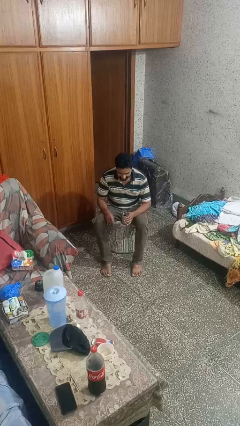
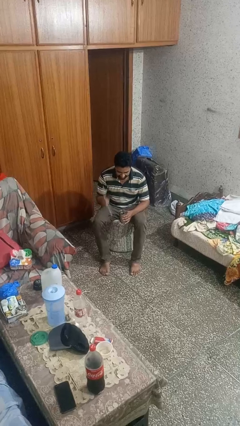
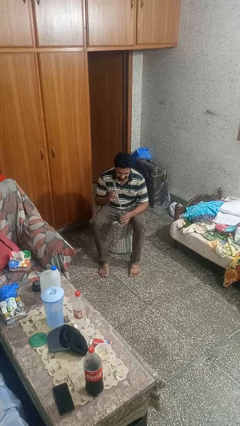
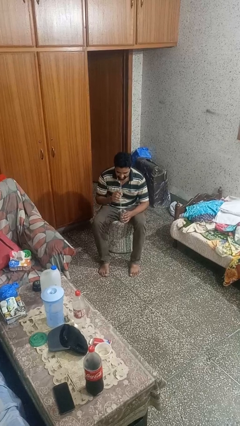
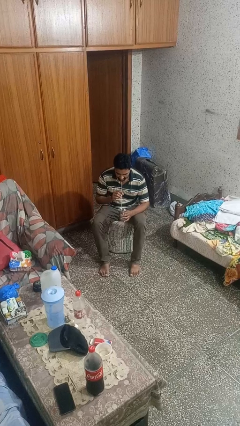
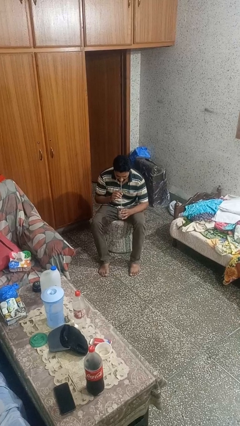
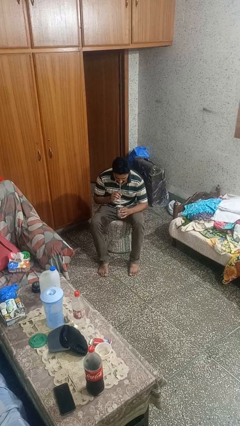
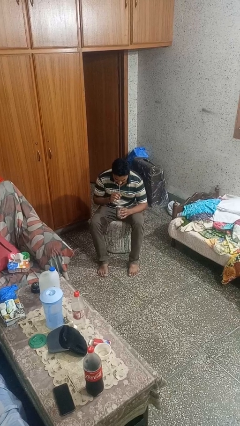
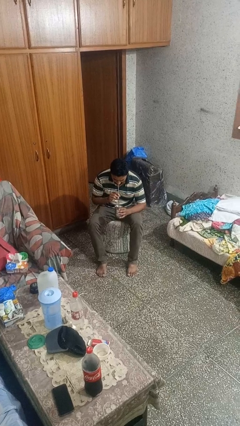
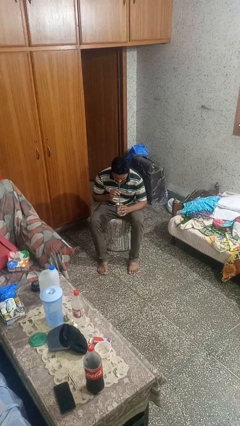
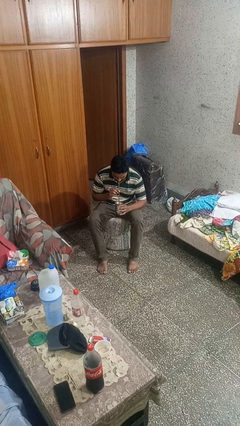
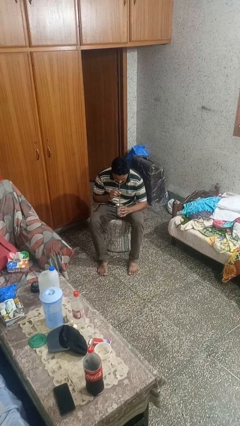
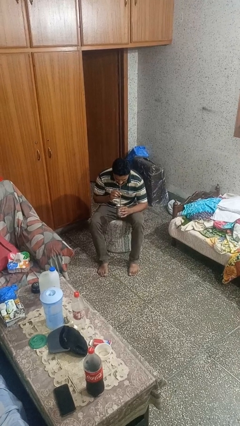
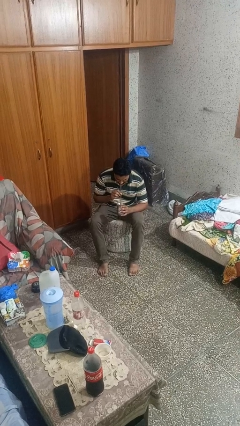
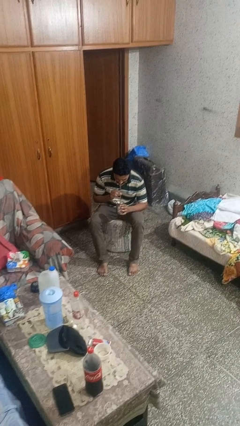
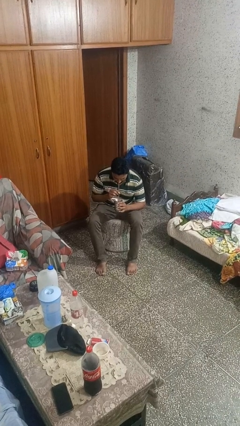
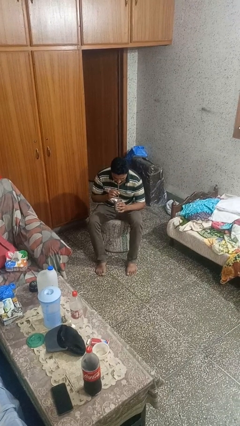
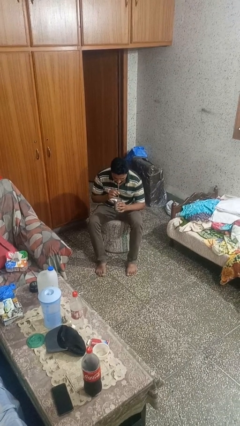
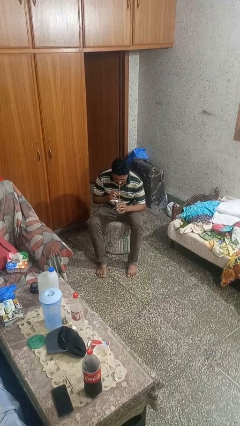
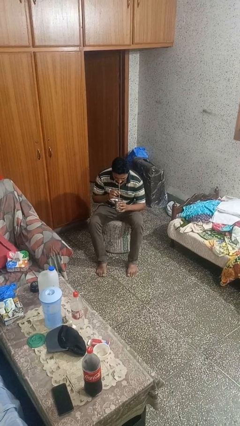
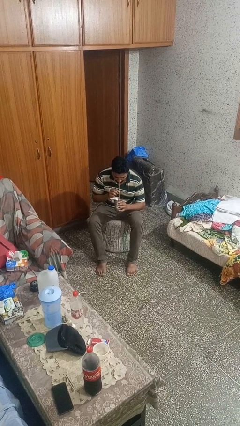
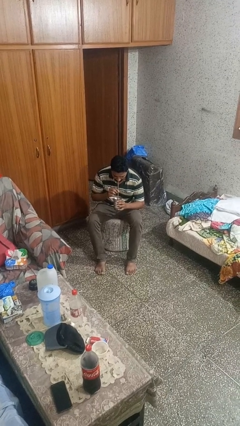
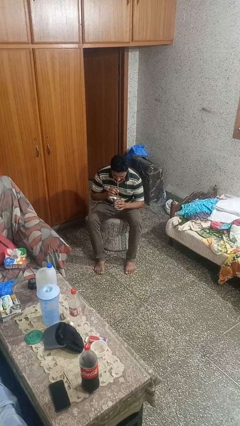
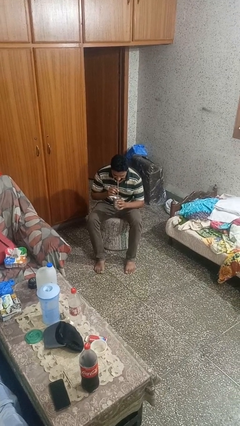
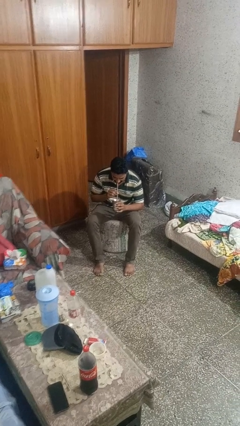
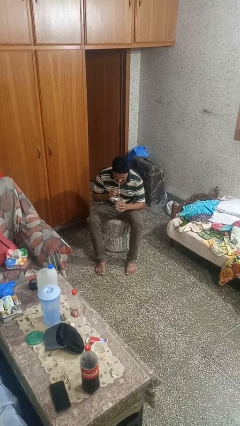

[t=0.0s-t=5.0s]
person drinks from straw

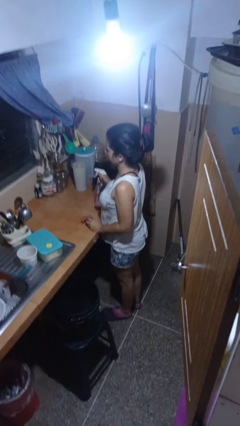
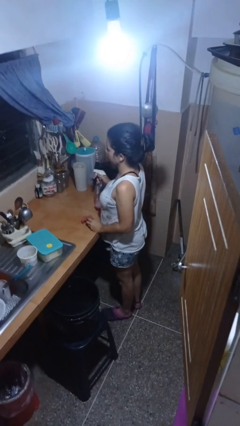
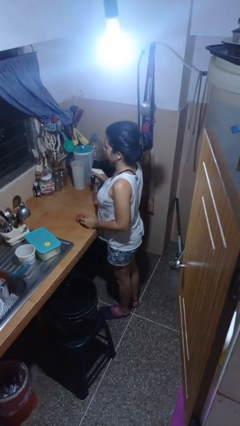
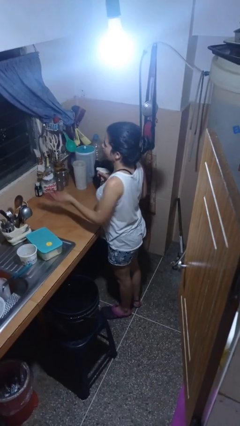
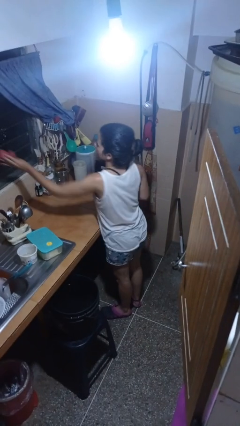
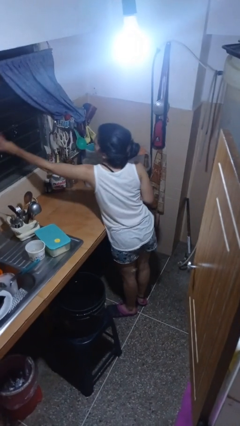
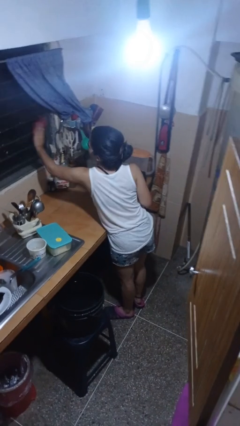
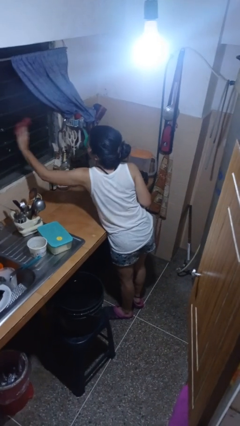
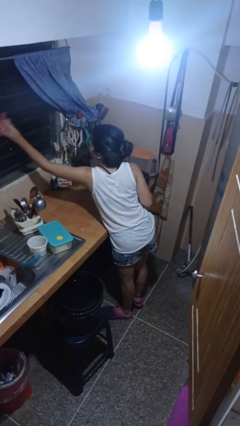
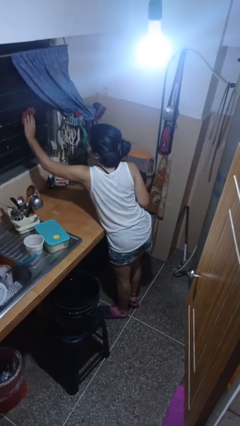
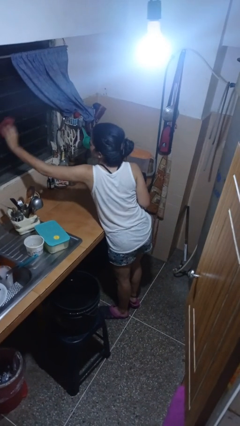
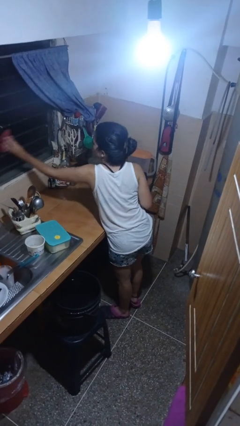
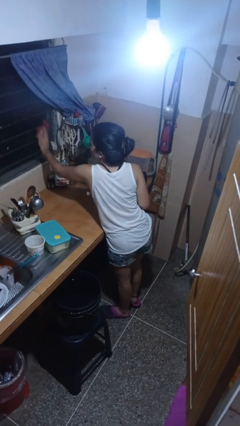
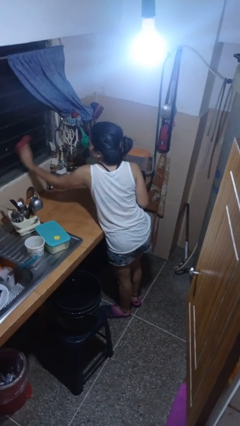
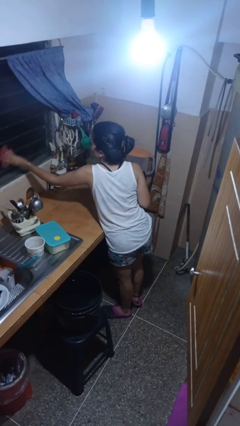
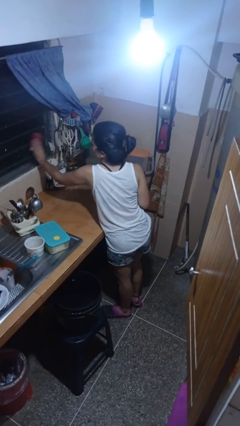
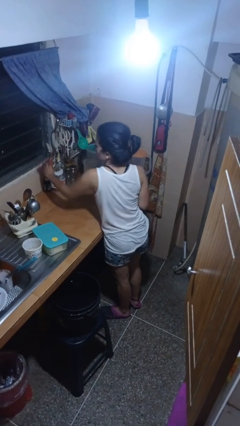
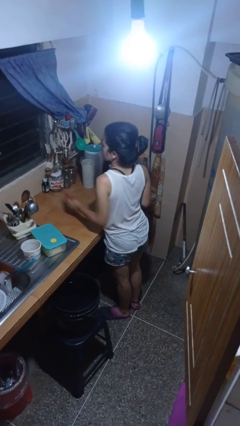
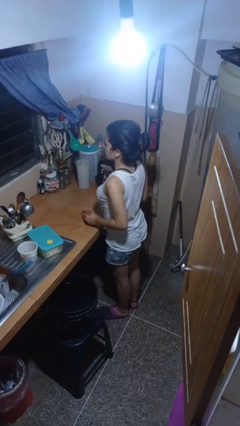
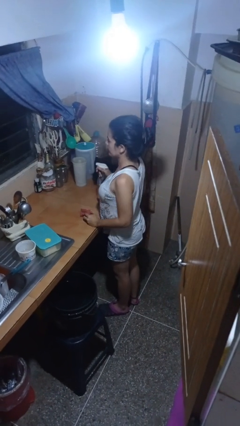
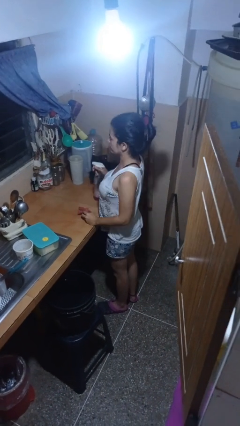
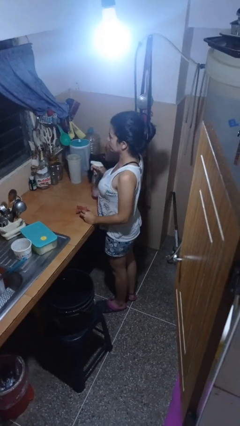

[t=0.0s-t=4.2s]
person washes window

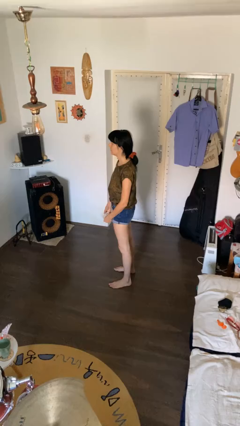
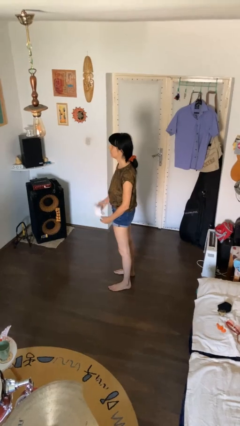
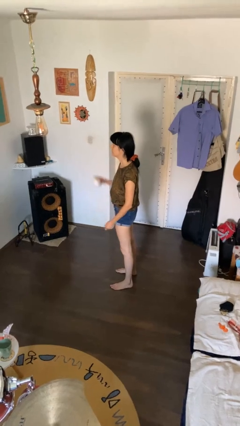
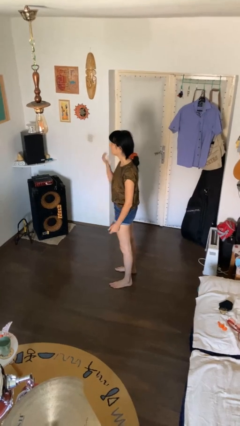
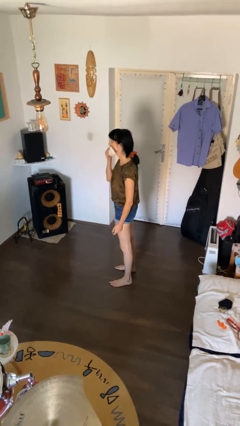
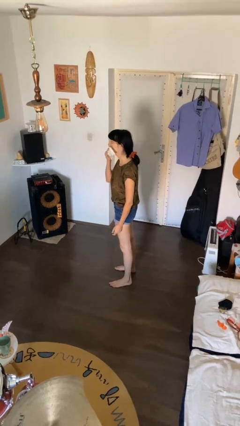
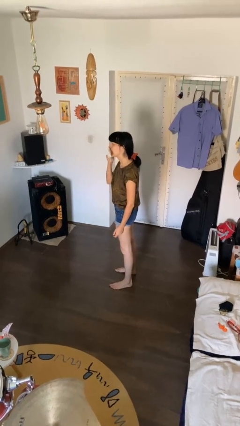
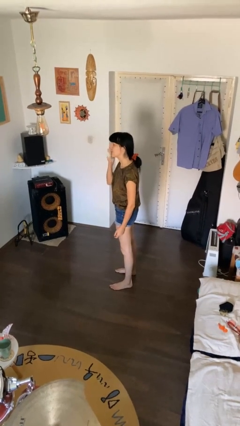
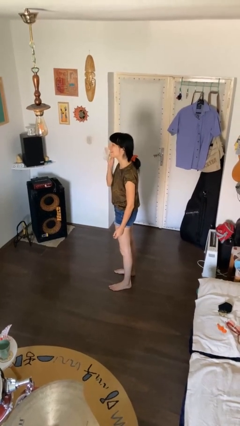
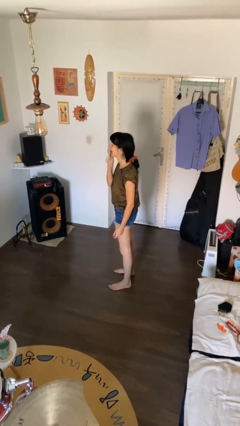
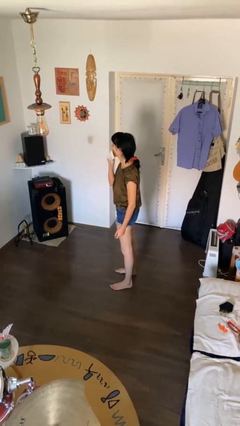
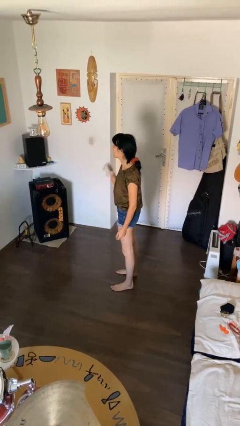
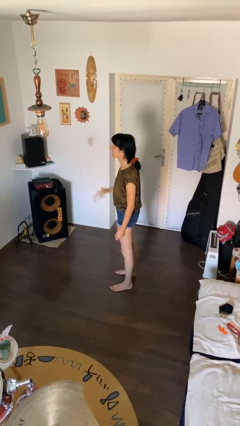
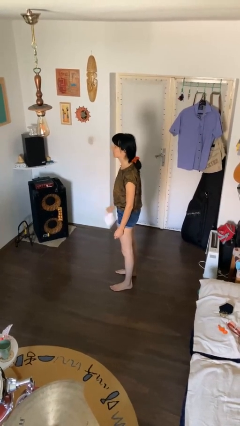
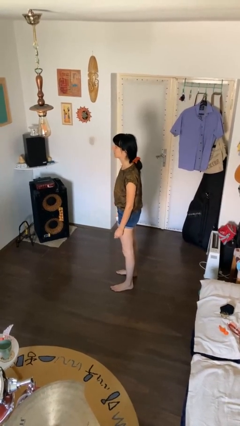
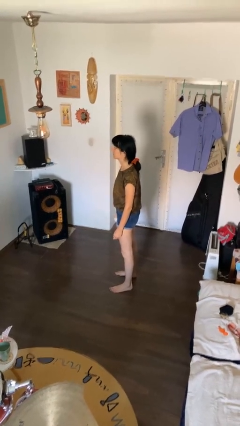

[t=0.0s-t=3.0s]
person wipes mouth with napkin

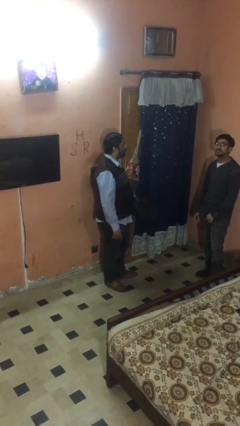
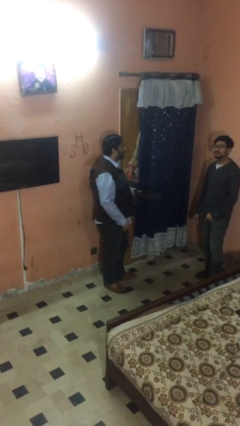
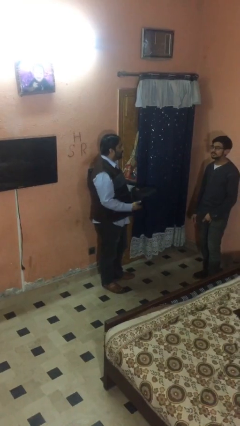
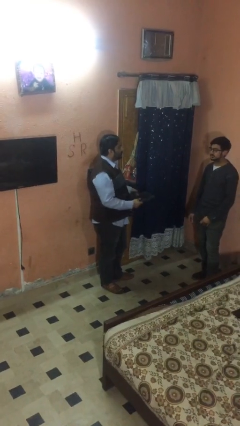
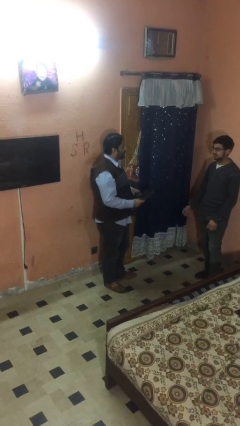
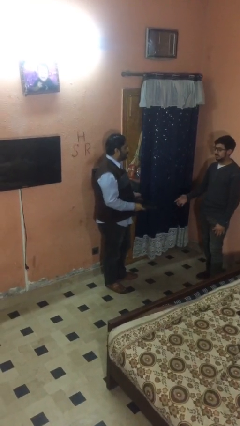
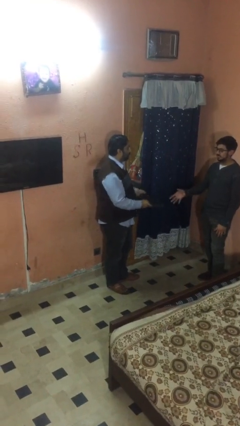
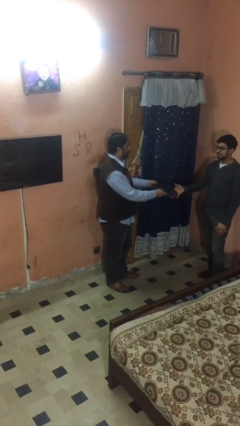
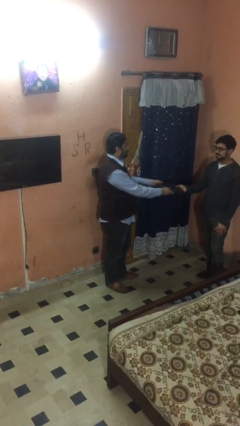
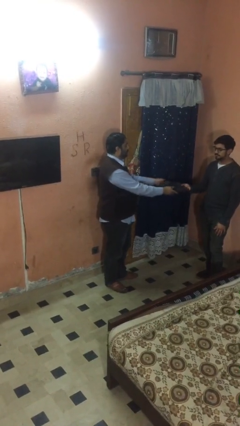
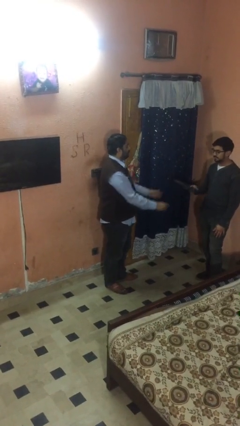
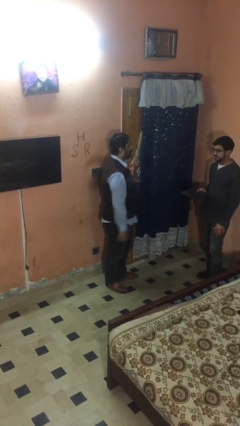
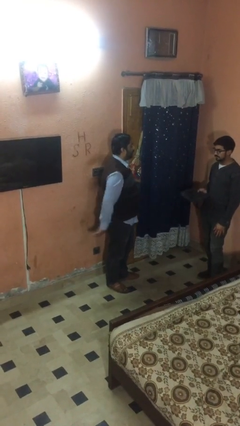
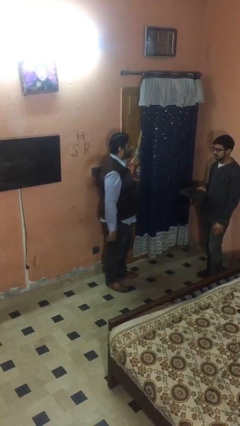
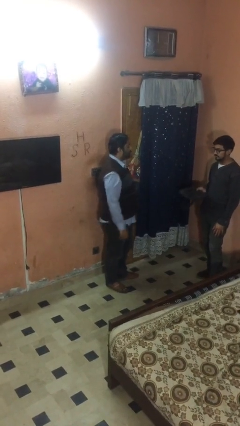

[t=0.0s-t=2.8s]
person transfers object to person

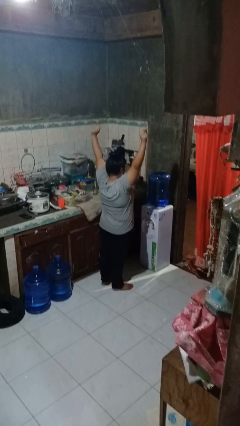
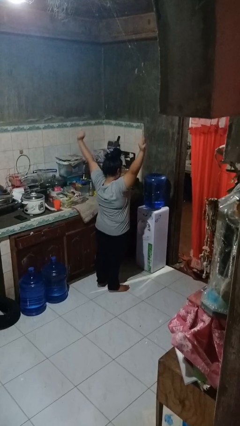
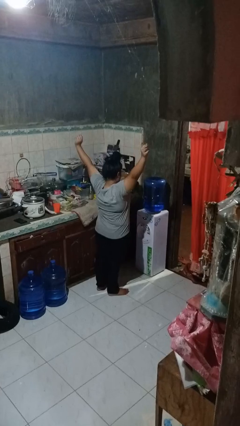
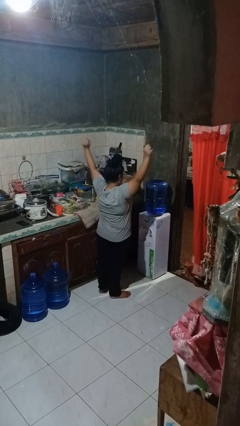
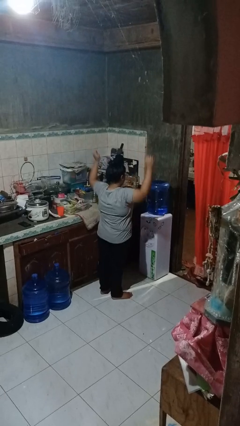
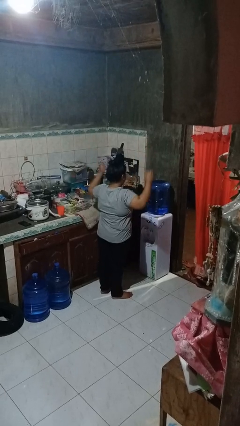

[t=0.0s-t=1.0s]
person stretches arms over head

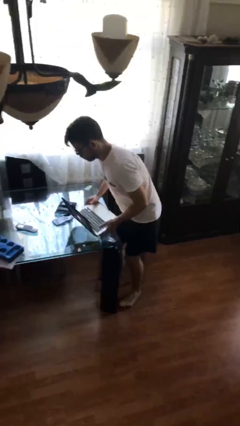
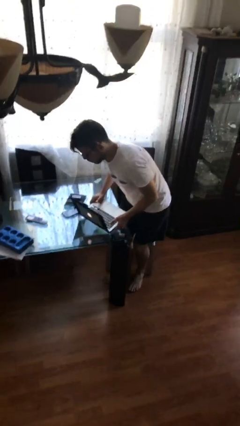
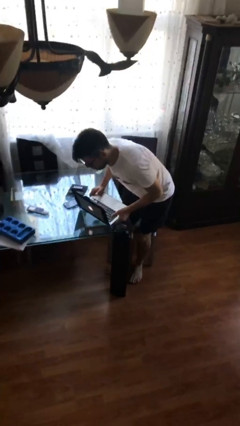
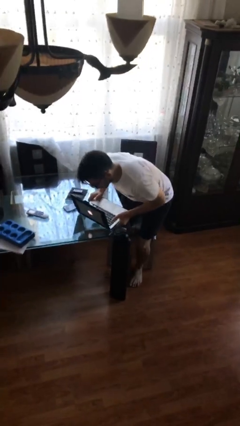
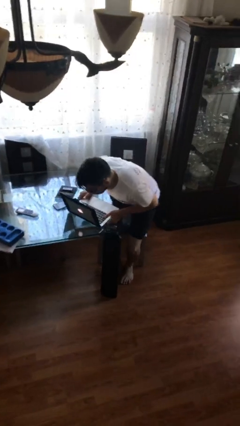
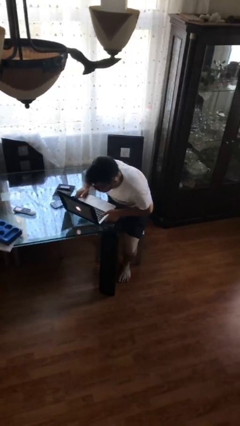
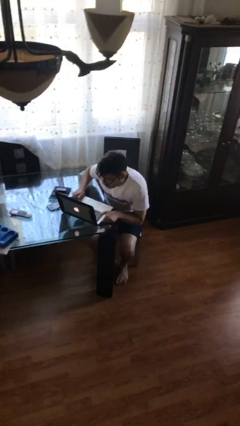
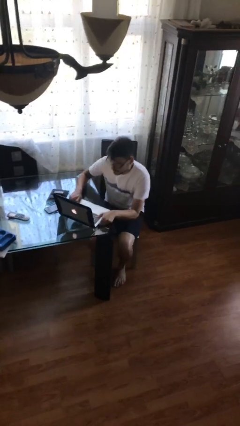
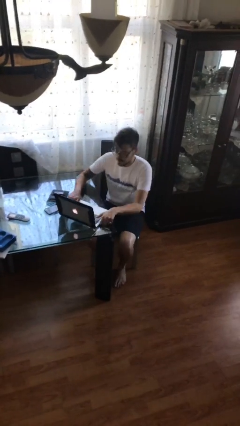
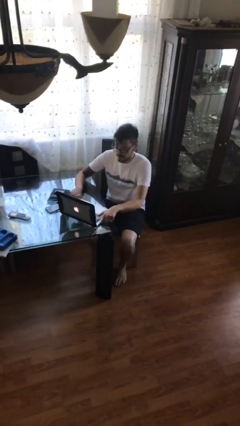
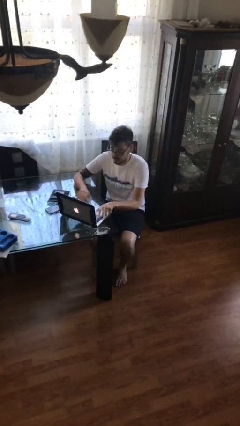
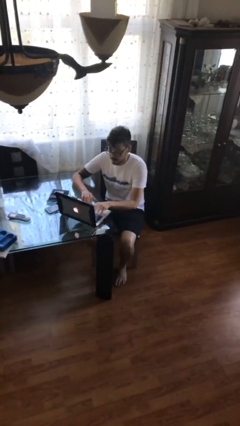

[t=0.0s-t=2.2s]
person sits down
